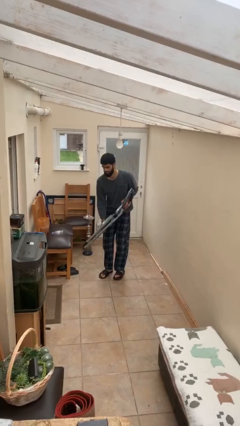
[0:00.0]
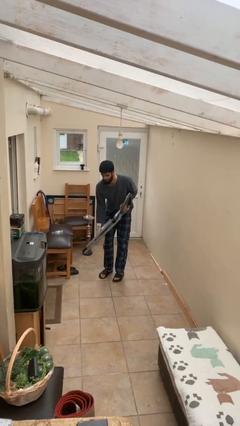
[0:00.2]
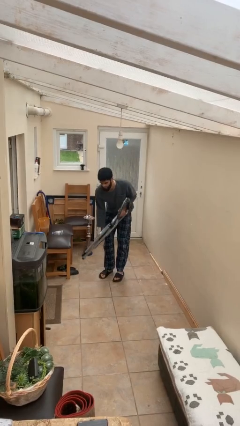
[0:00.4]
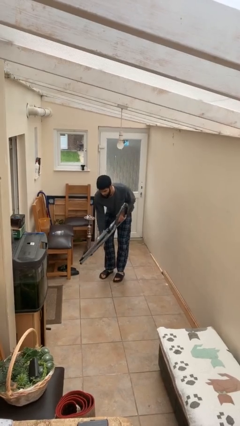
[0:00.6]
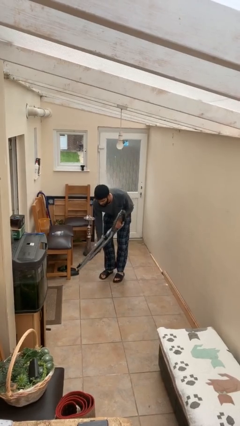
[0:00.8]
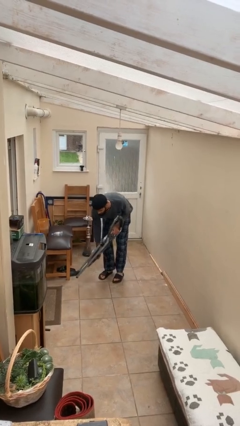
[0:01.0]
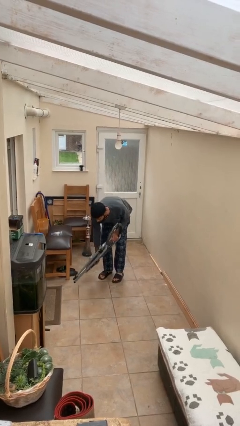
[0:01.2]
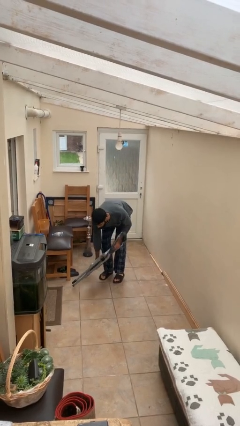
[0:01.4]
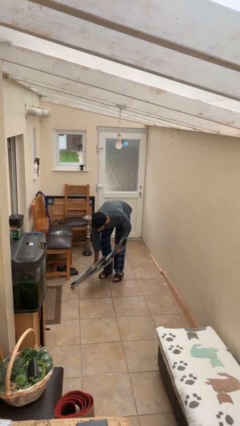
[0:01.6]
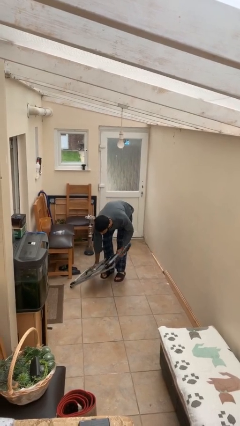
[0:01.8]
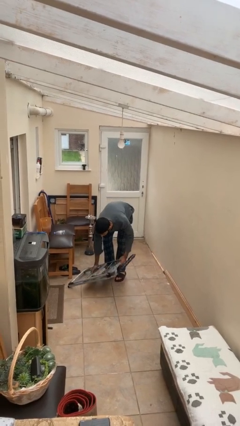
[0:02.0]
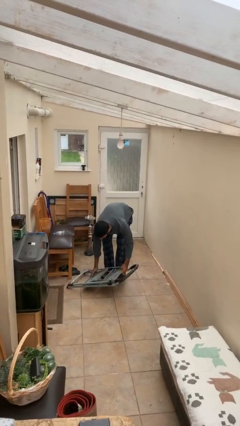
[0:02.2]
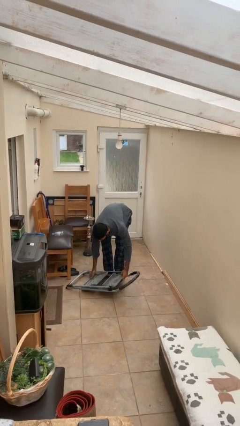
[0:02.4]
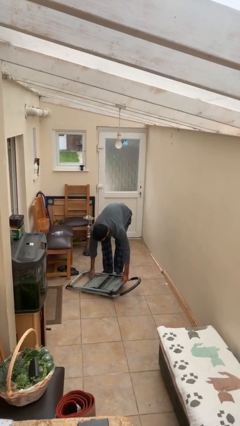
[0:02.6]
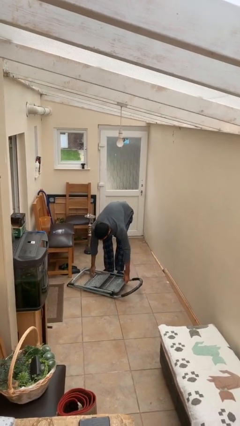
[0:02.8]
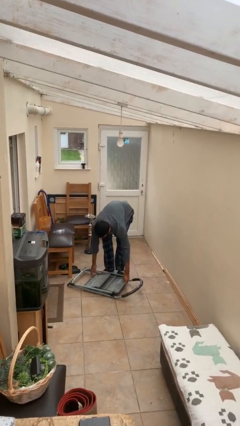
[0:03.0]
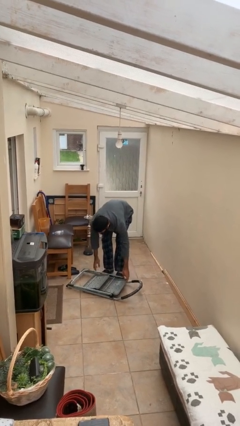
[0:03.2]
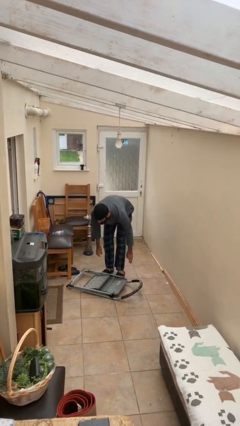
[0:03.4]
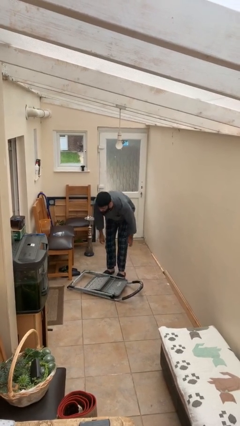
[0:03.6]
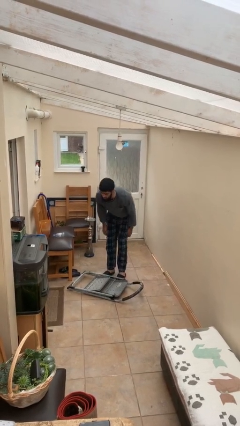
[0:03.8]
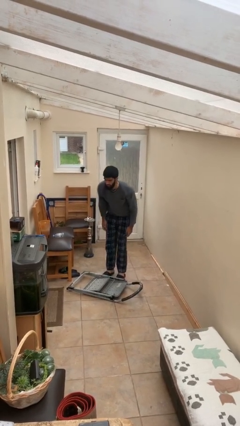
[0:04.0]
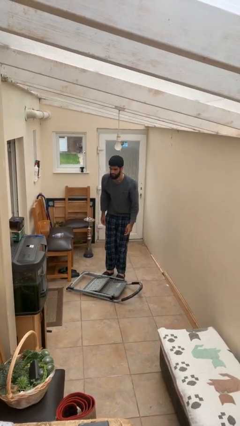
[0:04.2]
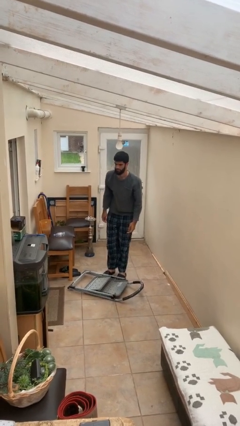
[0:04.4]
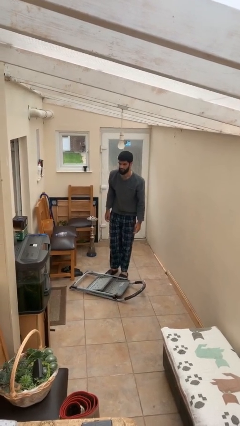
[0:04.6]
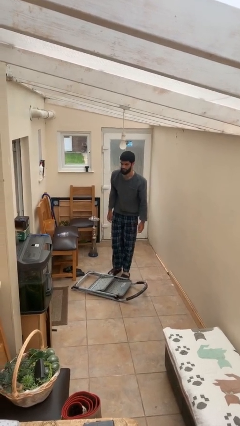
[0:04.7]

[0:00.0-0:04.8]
person puts down object on floor

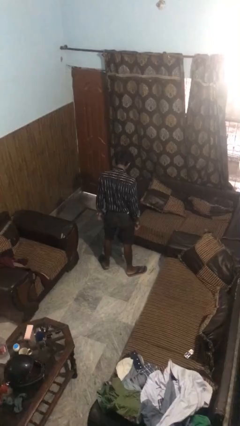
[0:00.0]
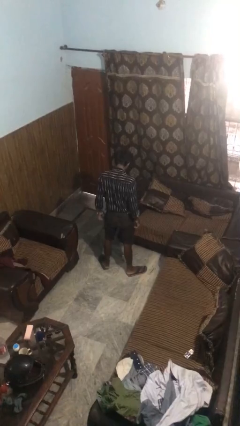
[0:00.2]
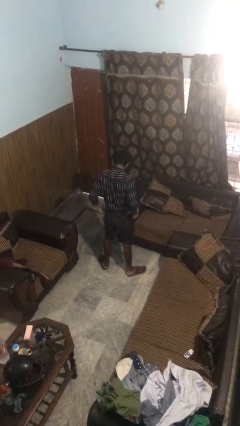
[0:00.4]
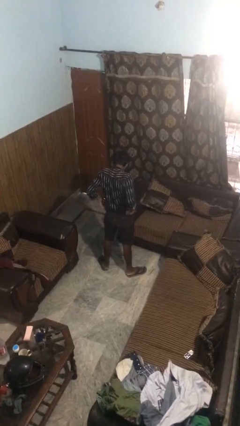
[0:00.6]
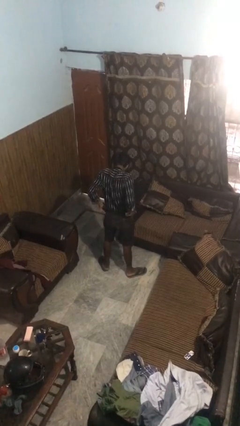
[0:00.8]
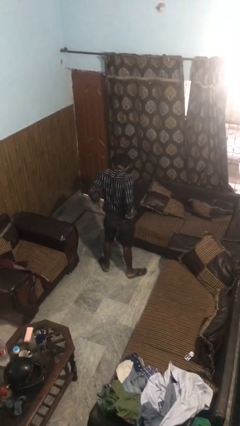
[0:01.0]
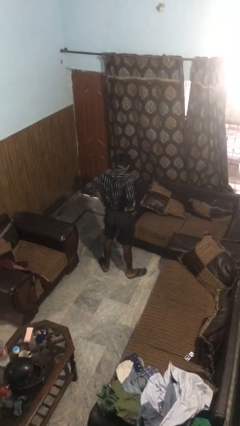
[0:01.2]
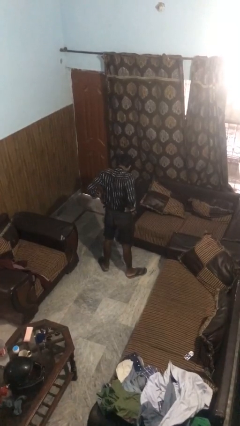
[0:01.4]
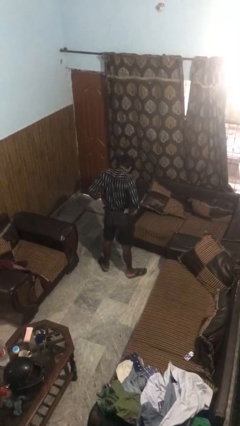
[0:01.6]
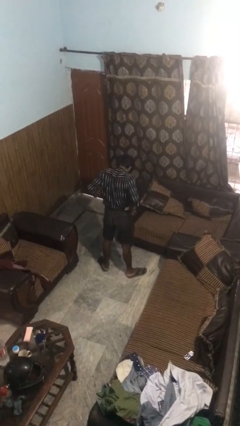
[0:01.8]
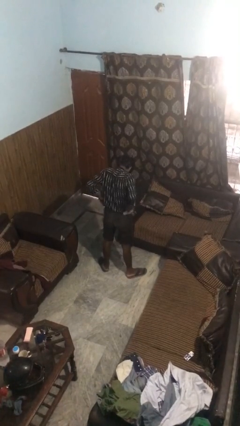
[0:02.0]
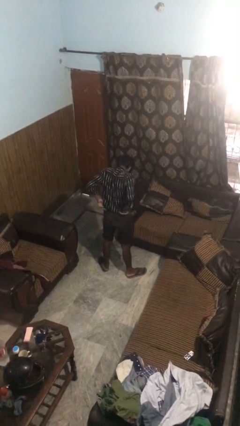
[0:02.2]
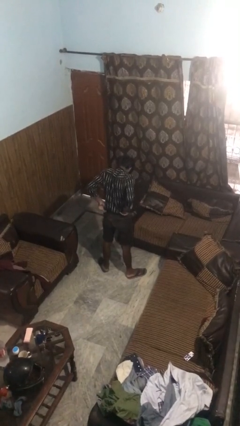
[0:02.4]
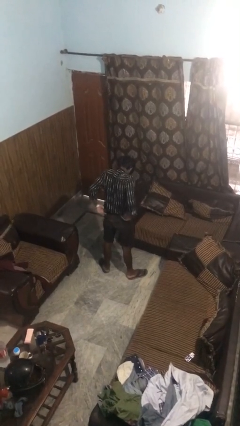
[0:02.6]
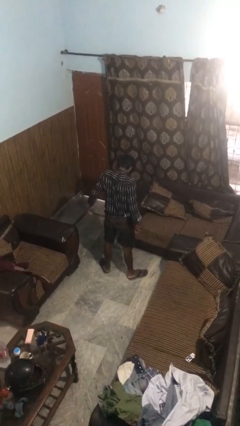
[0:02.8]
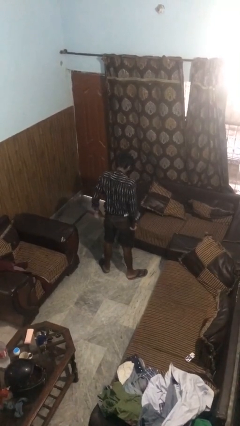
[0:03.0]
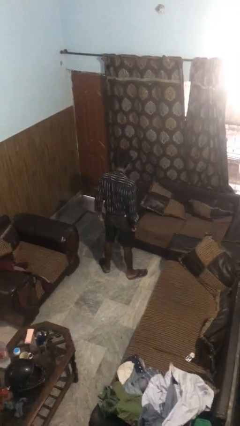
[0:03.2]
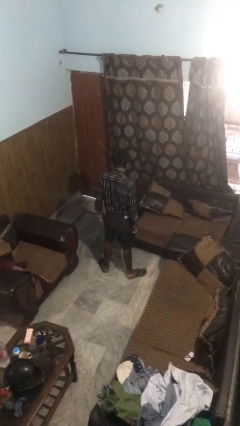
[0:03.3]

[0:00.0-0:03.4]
person hikes up pants

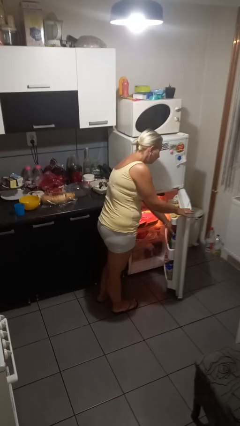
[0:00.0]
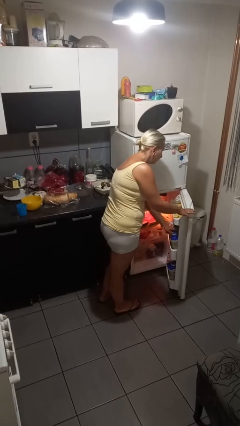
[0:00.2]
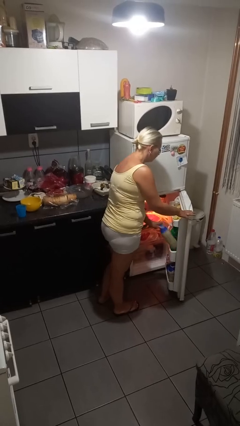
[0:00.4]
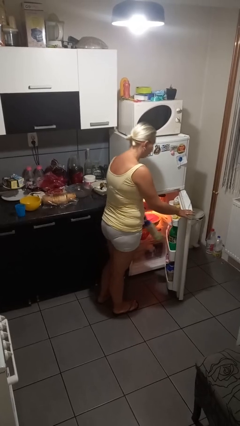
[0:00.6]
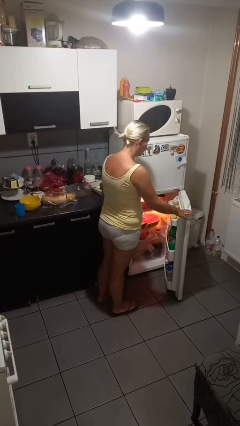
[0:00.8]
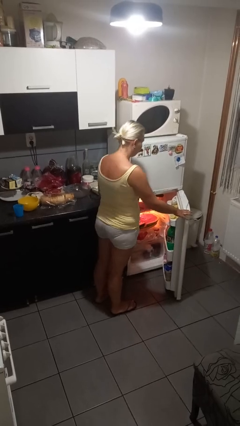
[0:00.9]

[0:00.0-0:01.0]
person takes object from refrigerator

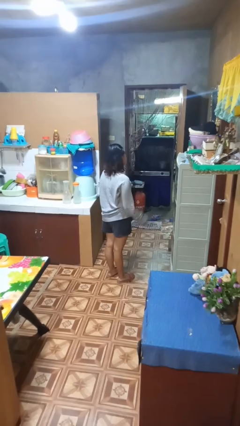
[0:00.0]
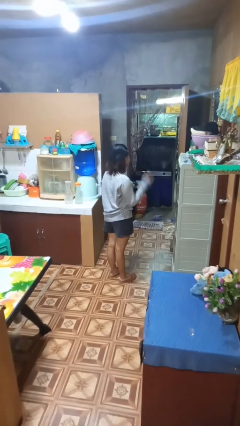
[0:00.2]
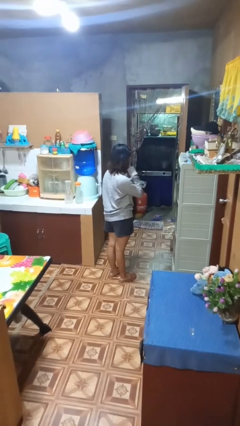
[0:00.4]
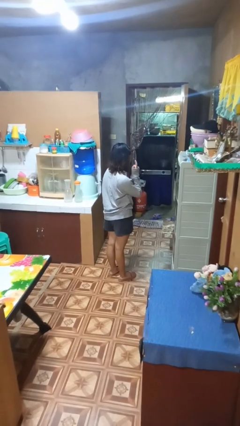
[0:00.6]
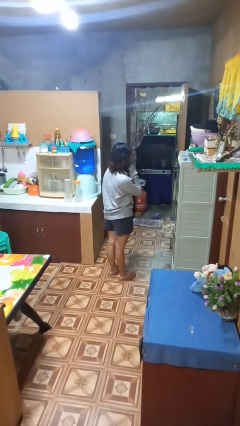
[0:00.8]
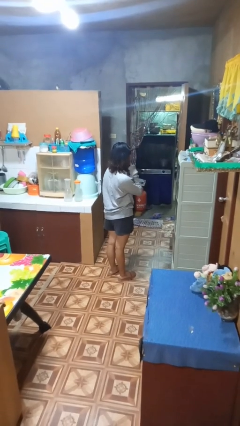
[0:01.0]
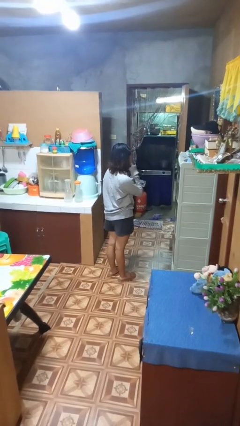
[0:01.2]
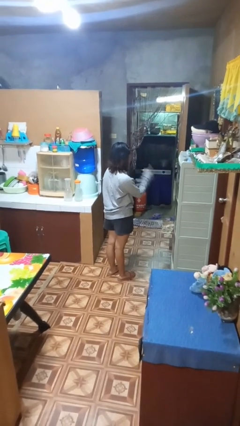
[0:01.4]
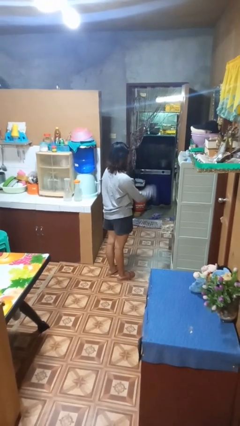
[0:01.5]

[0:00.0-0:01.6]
person gestures listen closely

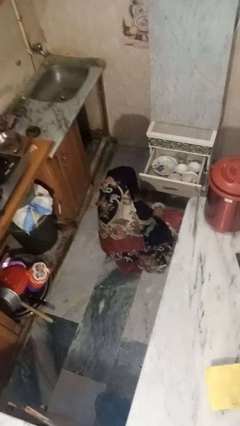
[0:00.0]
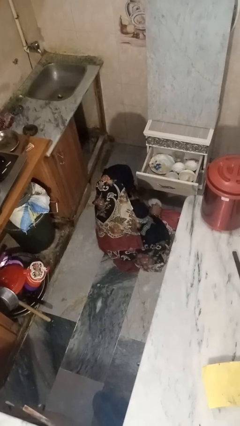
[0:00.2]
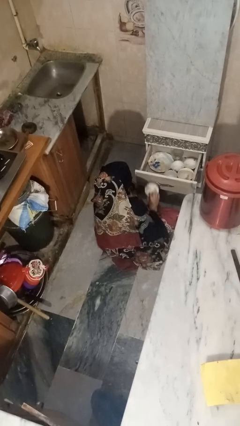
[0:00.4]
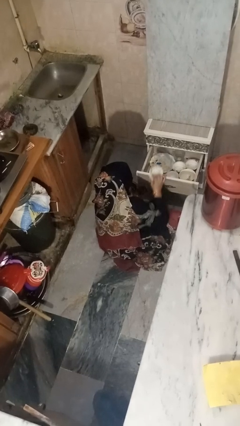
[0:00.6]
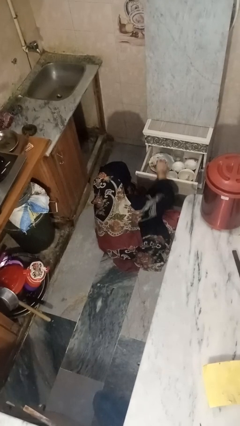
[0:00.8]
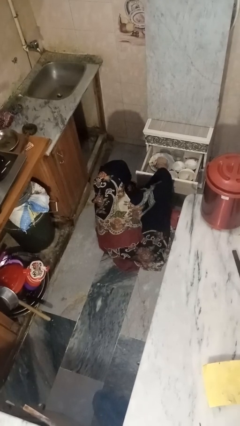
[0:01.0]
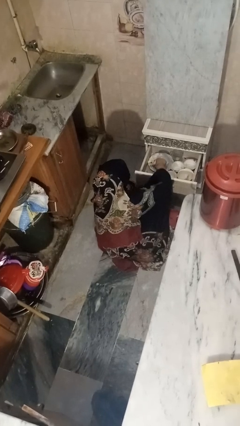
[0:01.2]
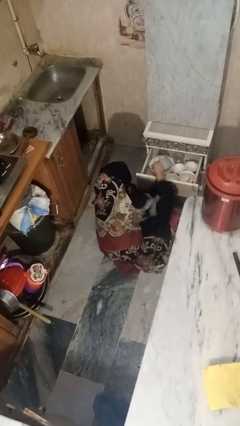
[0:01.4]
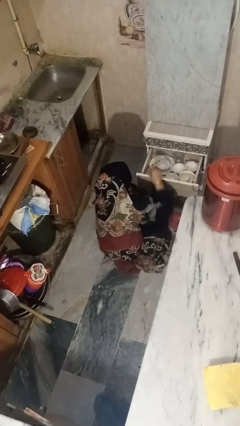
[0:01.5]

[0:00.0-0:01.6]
person puts object into kitchen drawer

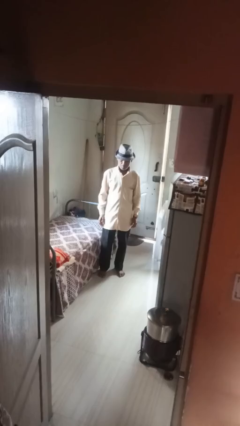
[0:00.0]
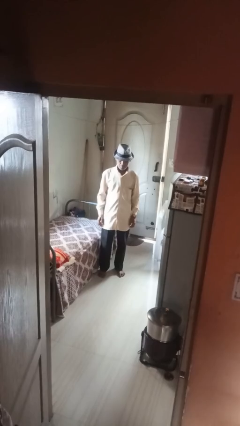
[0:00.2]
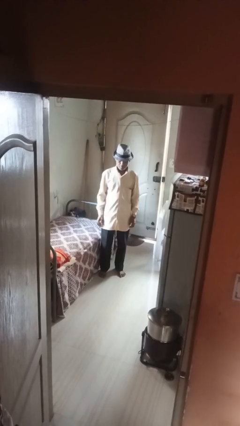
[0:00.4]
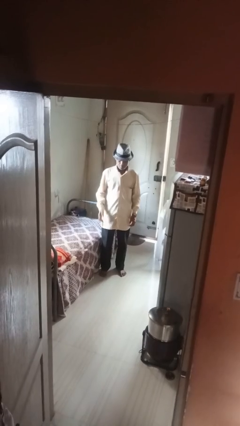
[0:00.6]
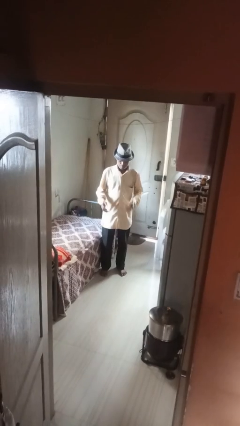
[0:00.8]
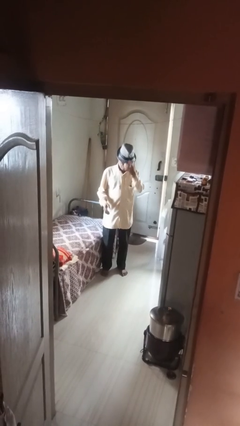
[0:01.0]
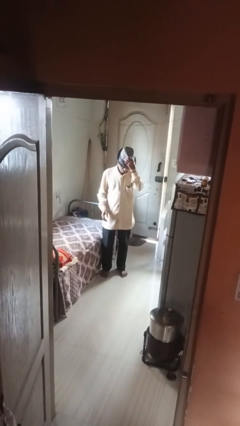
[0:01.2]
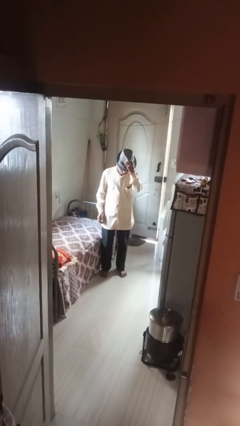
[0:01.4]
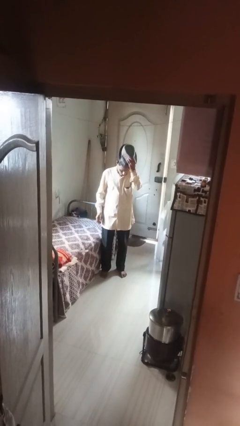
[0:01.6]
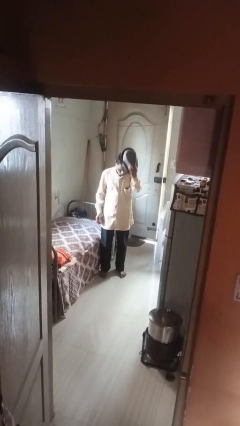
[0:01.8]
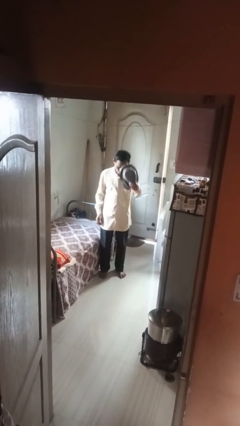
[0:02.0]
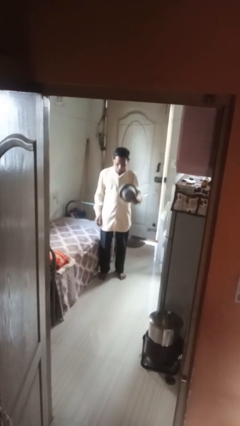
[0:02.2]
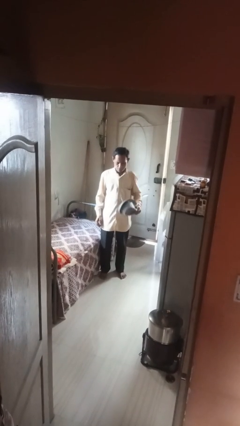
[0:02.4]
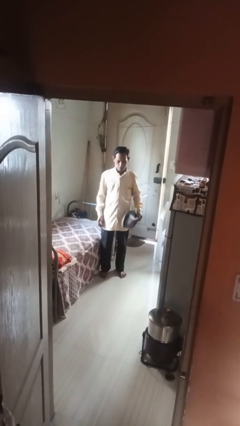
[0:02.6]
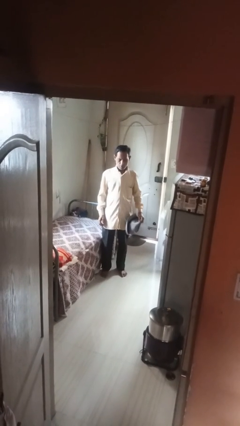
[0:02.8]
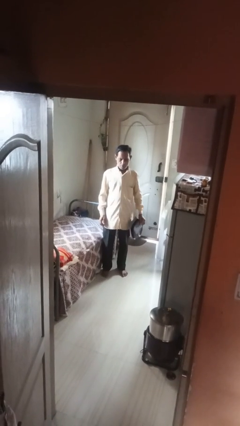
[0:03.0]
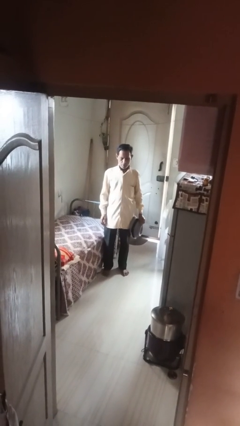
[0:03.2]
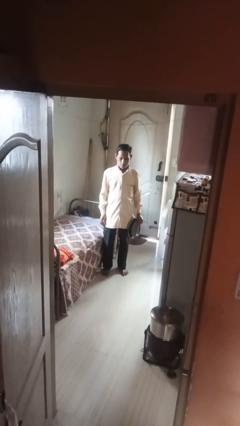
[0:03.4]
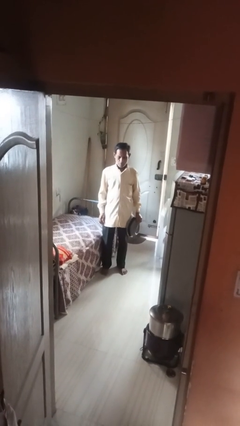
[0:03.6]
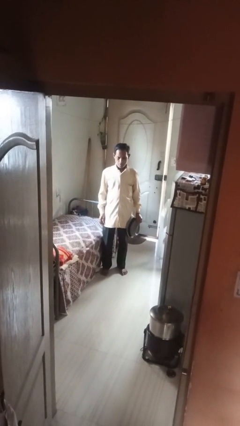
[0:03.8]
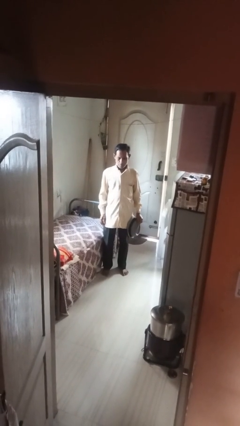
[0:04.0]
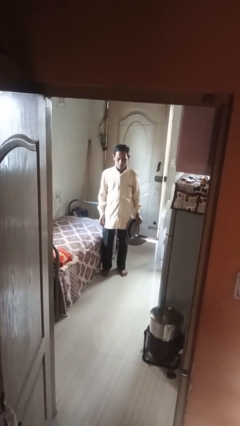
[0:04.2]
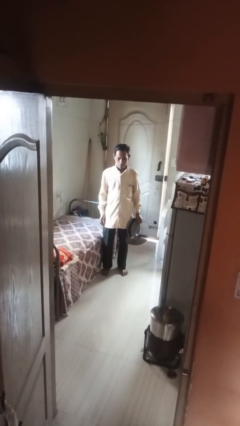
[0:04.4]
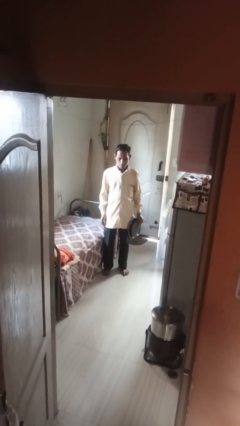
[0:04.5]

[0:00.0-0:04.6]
person takes off hat
